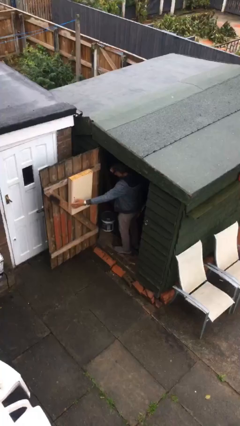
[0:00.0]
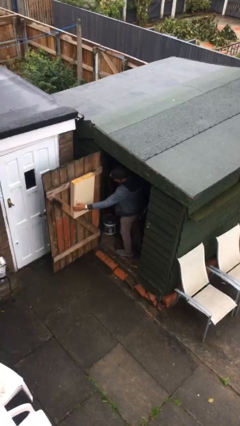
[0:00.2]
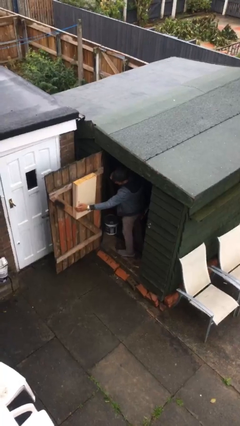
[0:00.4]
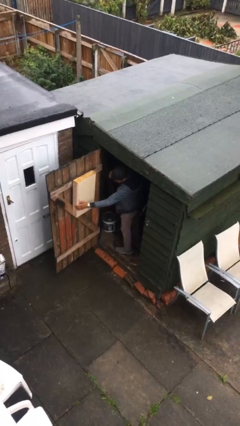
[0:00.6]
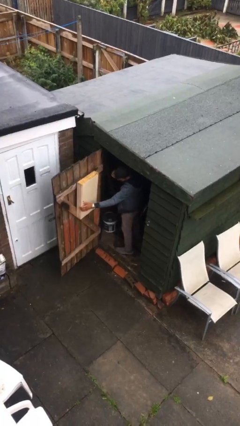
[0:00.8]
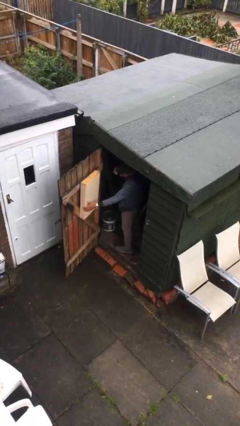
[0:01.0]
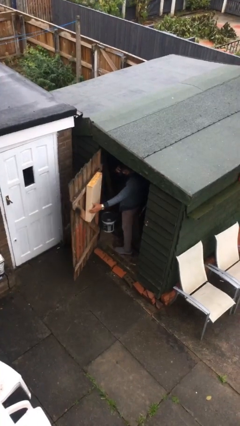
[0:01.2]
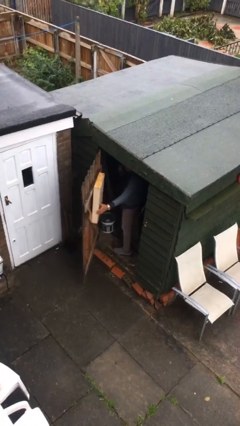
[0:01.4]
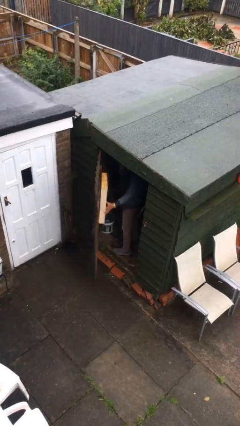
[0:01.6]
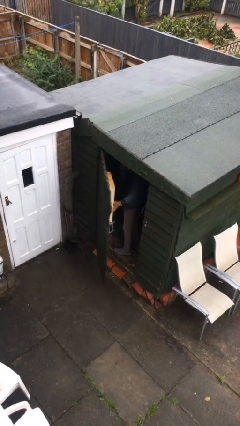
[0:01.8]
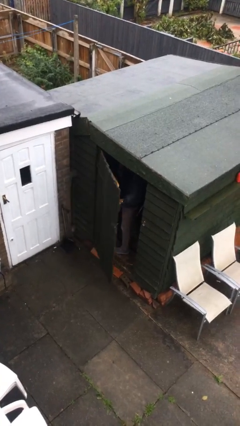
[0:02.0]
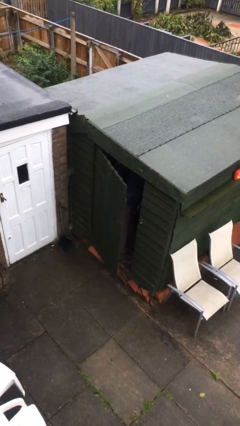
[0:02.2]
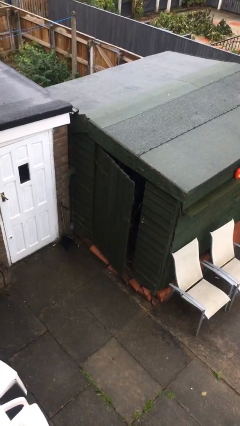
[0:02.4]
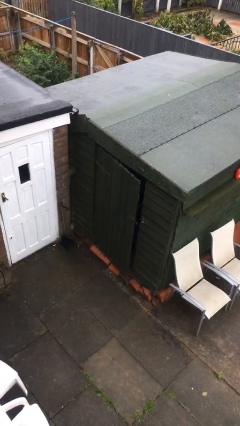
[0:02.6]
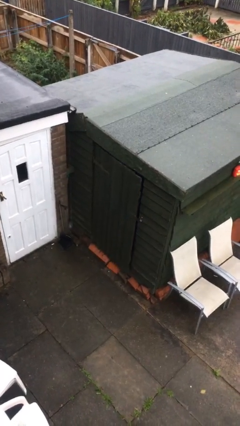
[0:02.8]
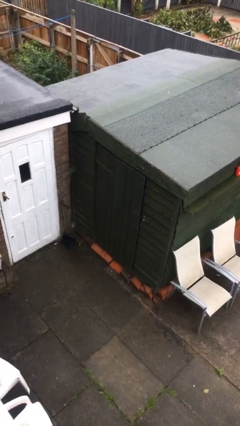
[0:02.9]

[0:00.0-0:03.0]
person closes facility door

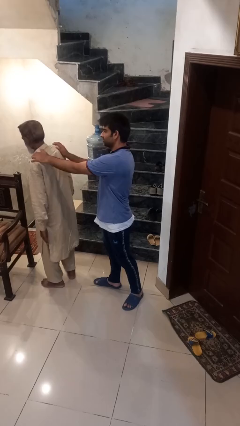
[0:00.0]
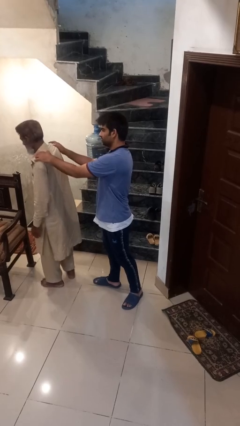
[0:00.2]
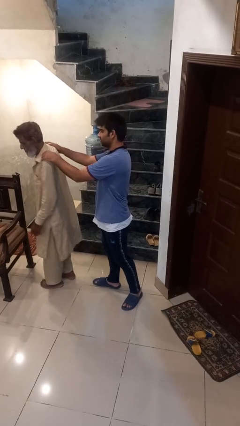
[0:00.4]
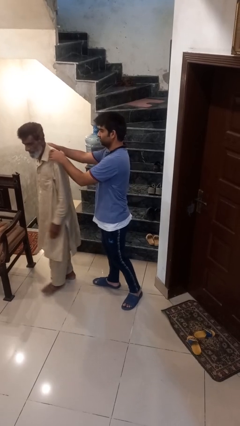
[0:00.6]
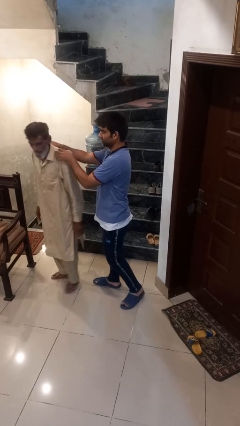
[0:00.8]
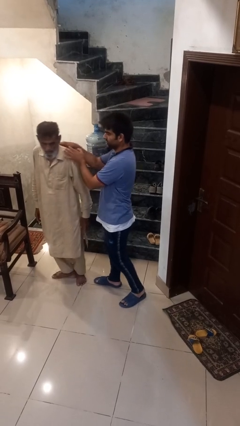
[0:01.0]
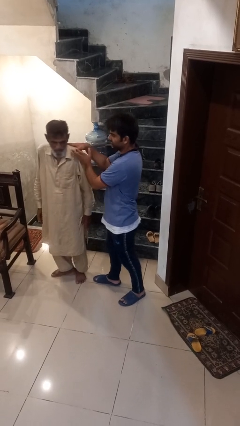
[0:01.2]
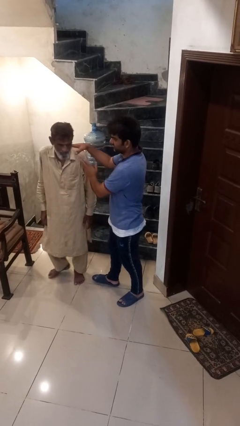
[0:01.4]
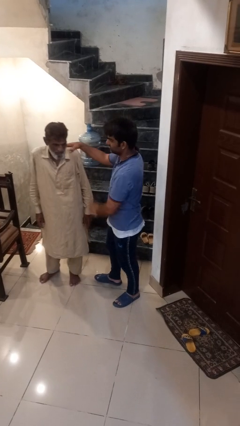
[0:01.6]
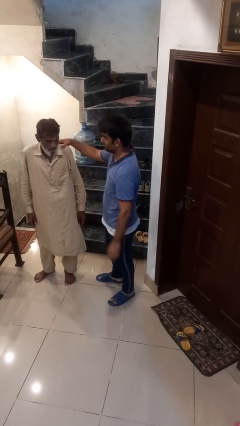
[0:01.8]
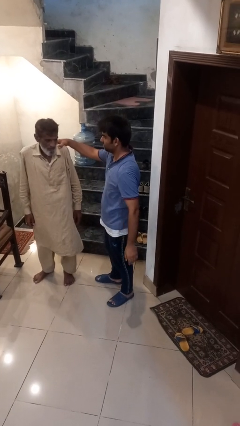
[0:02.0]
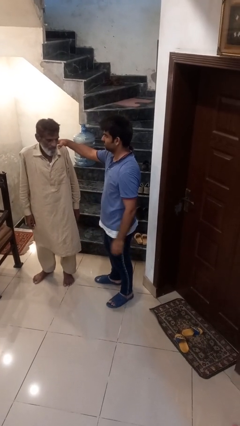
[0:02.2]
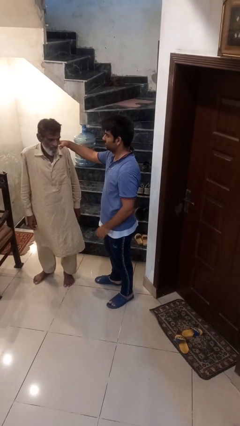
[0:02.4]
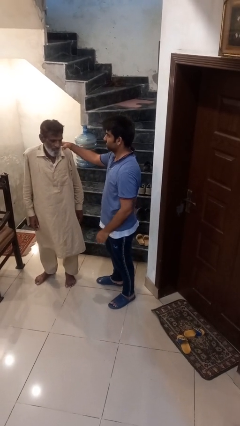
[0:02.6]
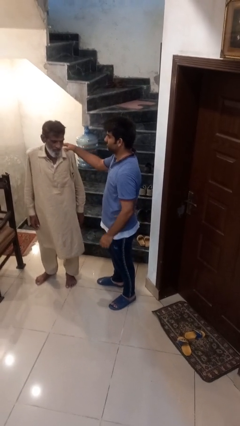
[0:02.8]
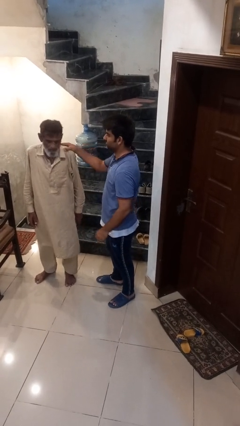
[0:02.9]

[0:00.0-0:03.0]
person spins person around

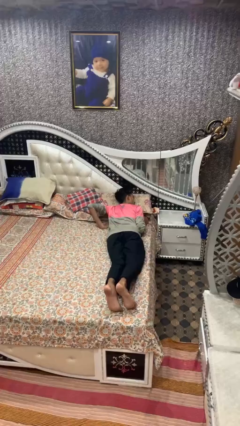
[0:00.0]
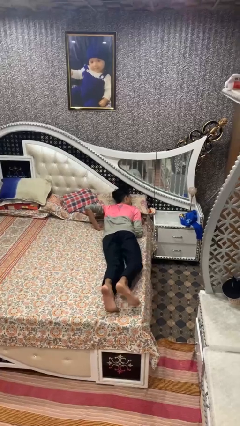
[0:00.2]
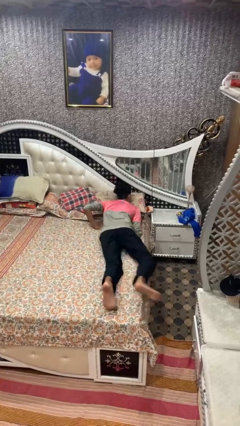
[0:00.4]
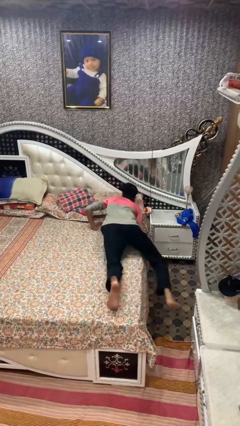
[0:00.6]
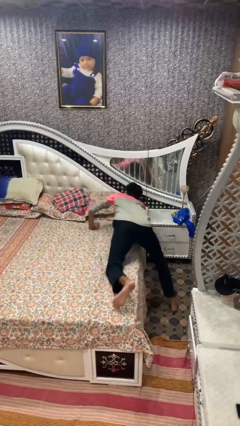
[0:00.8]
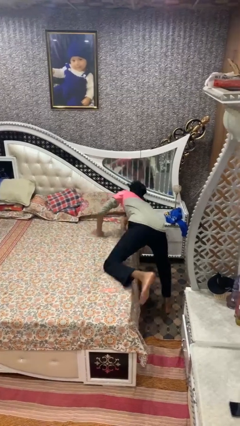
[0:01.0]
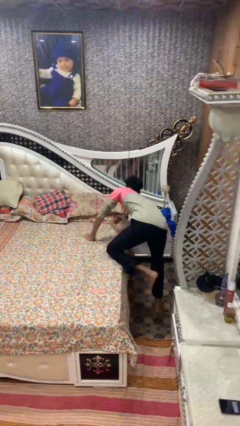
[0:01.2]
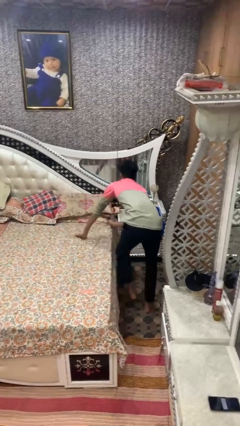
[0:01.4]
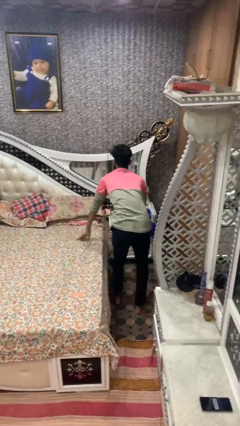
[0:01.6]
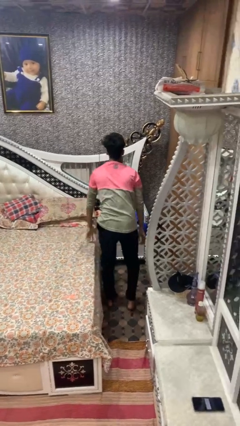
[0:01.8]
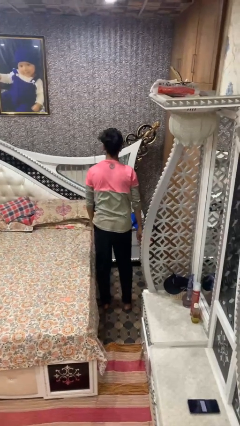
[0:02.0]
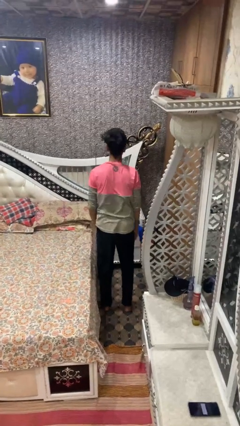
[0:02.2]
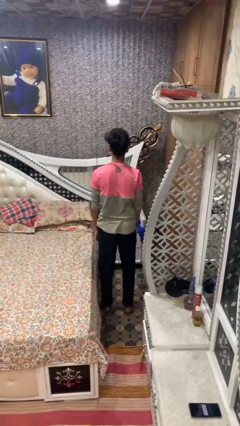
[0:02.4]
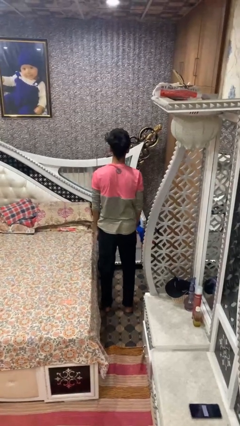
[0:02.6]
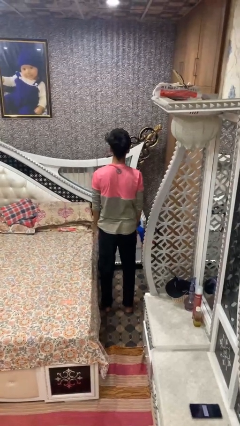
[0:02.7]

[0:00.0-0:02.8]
person stands up

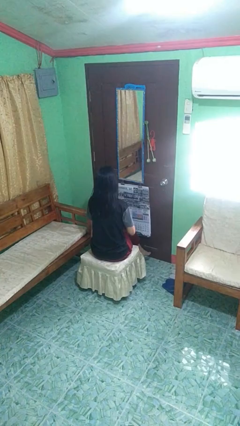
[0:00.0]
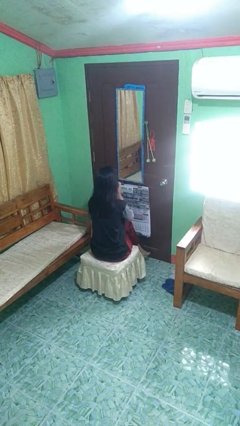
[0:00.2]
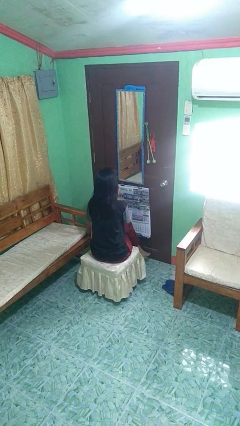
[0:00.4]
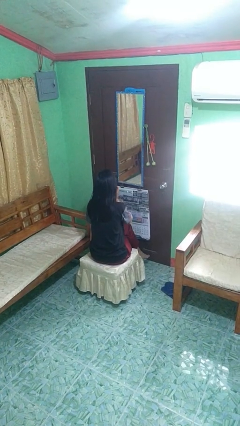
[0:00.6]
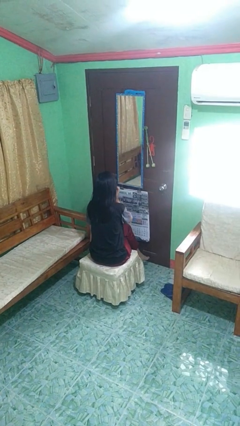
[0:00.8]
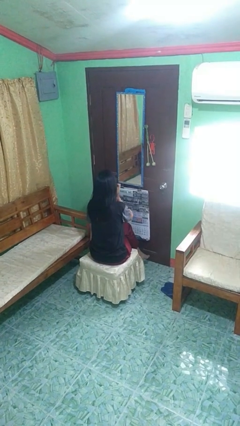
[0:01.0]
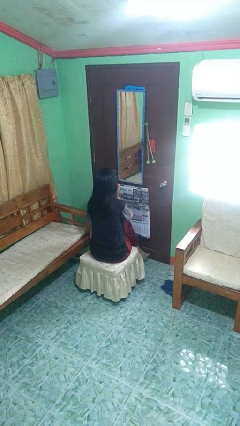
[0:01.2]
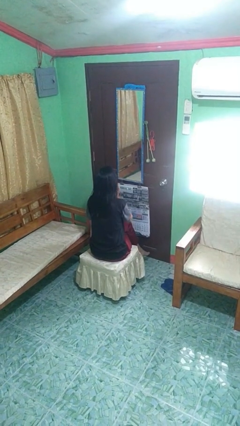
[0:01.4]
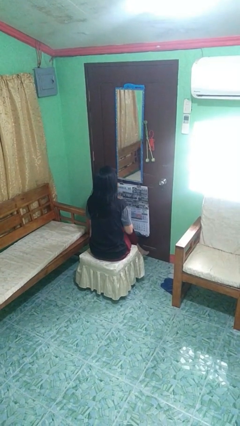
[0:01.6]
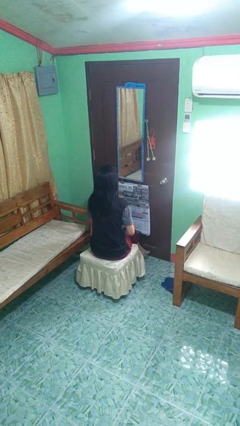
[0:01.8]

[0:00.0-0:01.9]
person scratches face

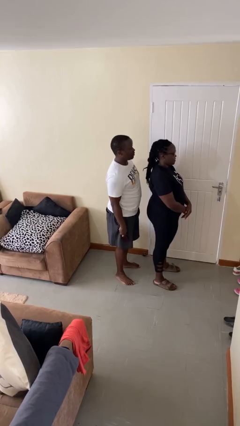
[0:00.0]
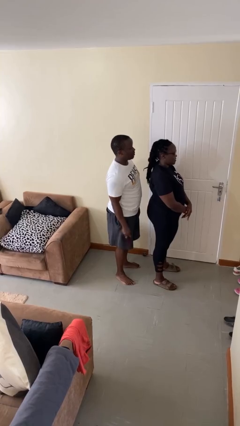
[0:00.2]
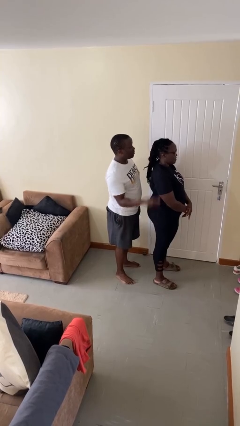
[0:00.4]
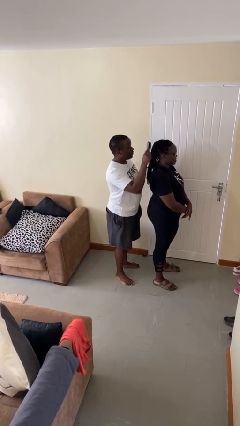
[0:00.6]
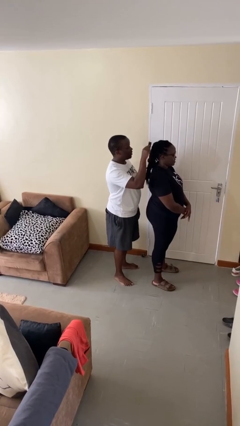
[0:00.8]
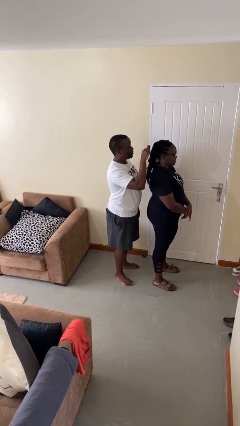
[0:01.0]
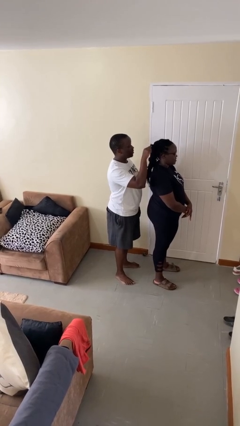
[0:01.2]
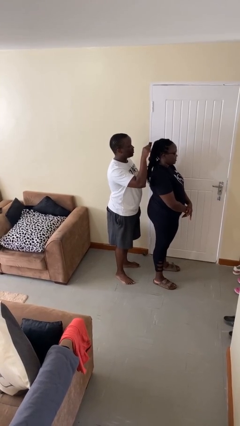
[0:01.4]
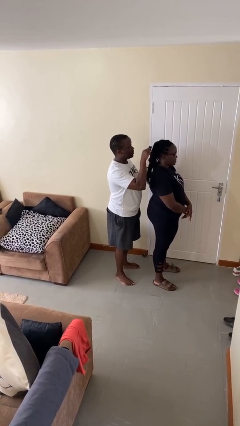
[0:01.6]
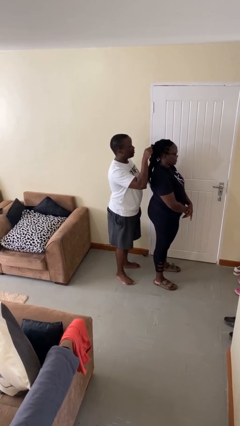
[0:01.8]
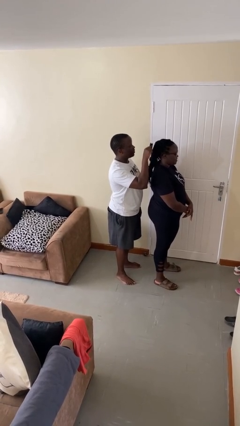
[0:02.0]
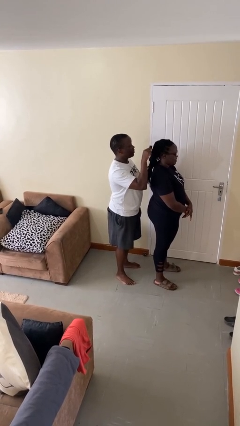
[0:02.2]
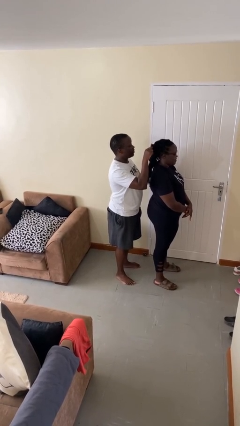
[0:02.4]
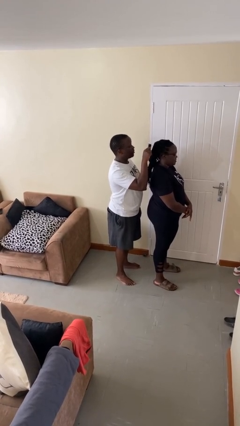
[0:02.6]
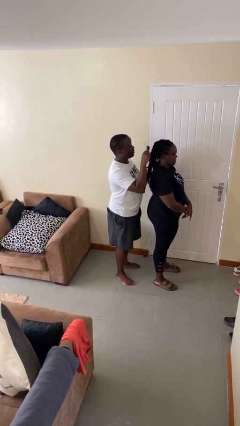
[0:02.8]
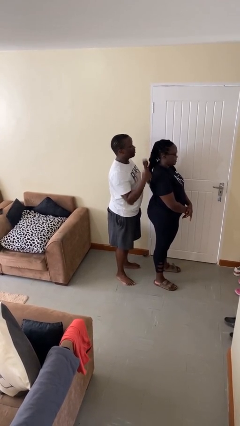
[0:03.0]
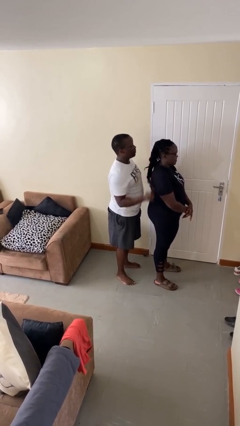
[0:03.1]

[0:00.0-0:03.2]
person brushes hair of person

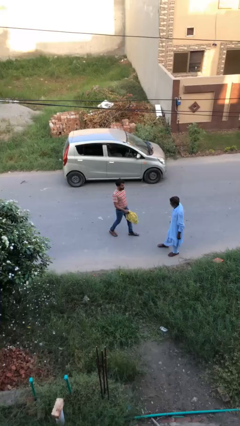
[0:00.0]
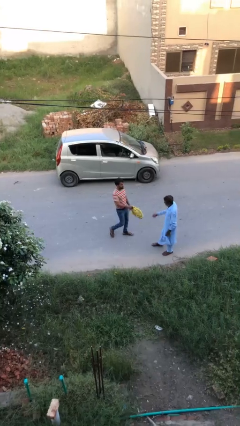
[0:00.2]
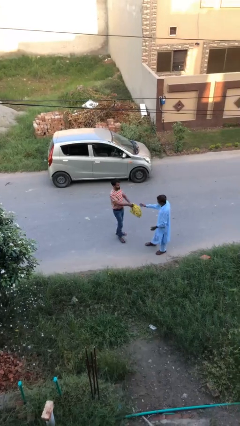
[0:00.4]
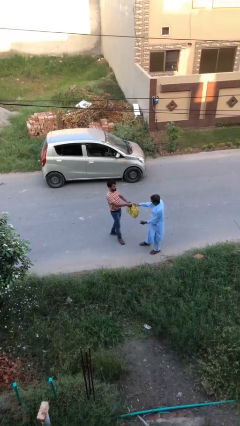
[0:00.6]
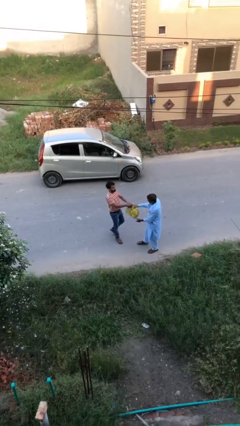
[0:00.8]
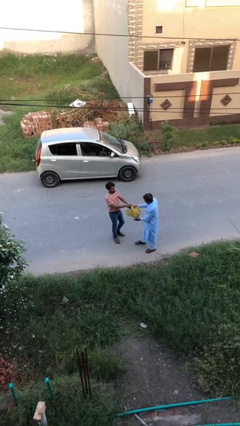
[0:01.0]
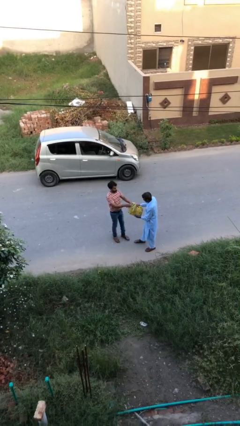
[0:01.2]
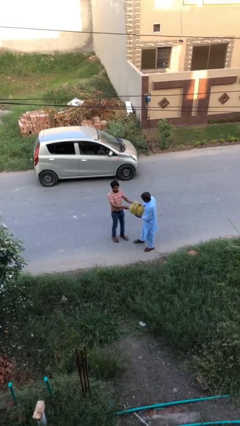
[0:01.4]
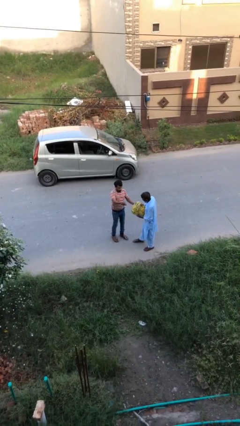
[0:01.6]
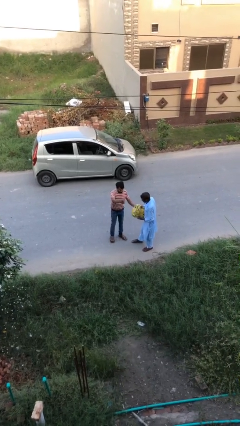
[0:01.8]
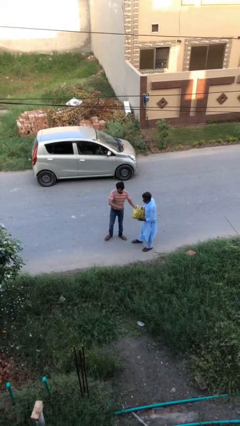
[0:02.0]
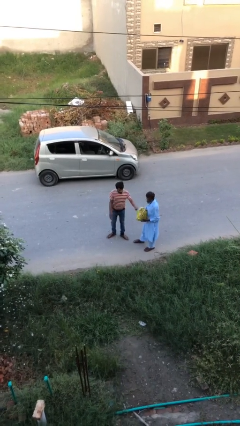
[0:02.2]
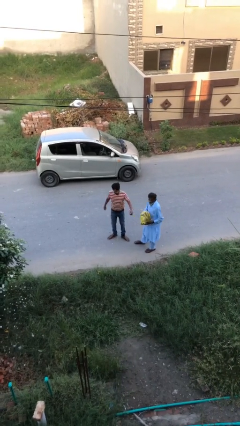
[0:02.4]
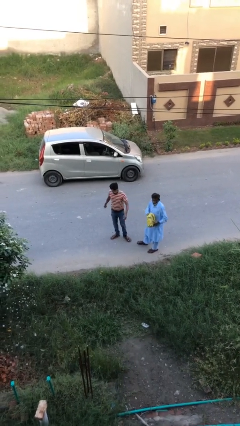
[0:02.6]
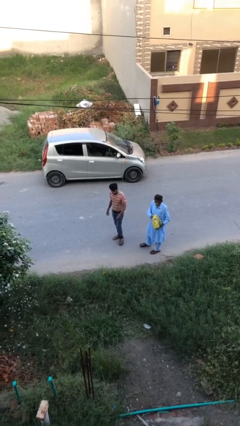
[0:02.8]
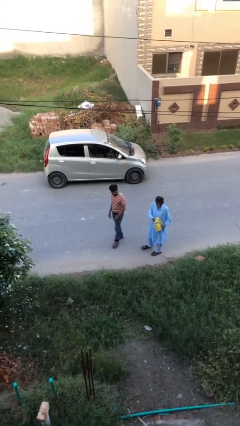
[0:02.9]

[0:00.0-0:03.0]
person transfers object to person

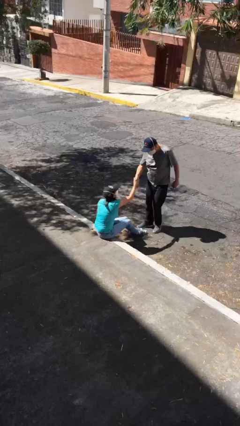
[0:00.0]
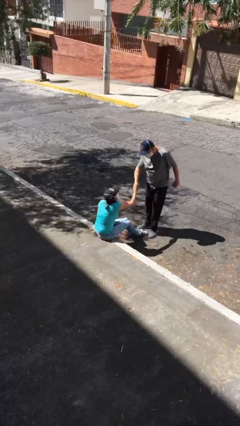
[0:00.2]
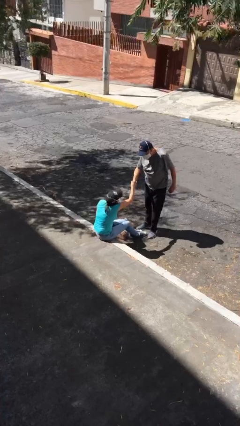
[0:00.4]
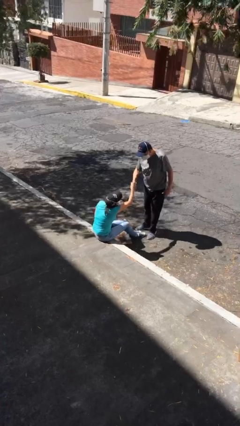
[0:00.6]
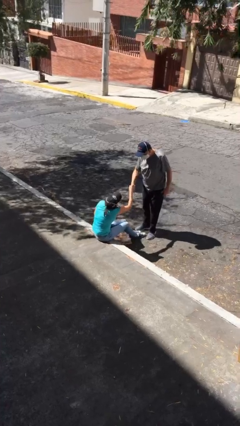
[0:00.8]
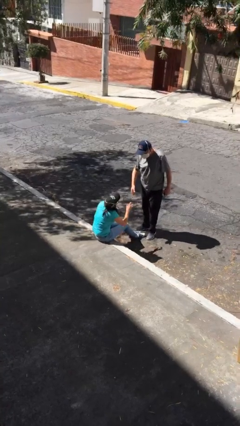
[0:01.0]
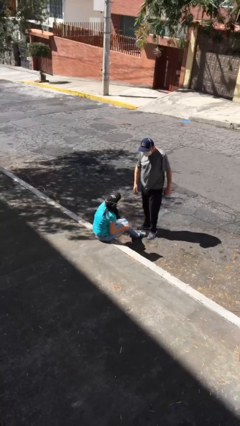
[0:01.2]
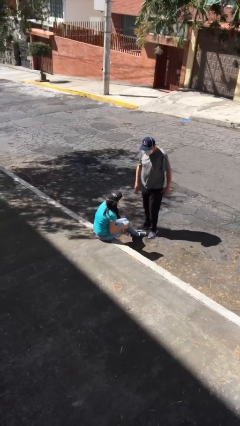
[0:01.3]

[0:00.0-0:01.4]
person shakes hand
